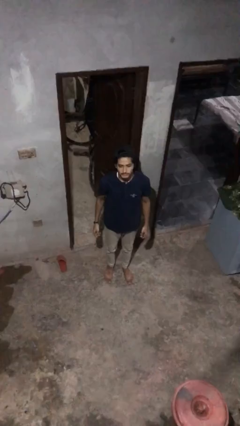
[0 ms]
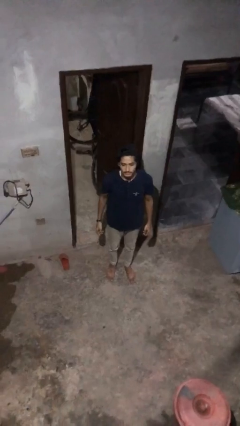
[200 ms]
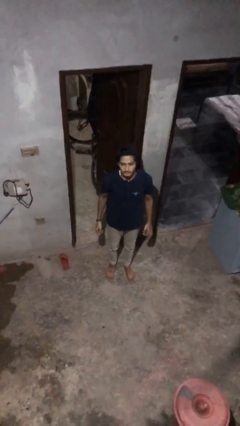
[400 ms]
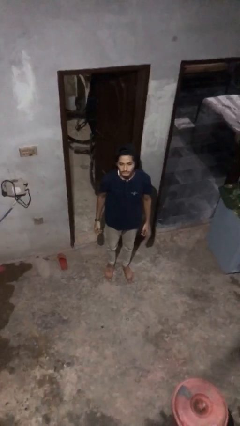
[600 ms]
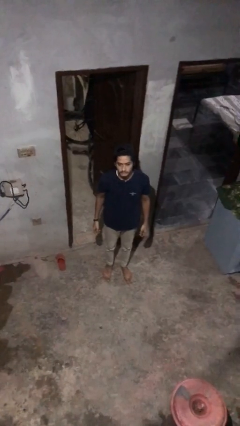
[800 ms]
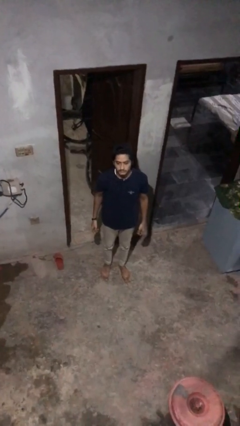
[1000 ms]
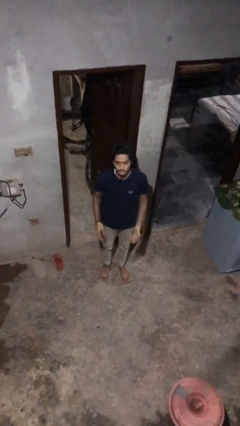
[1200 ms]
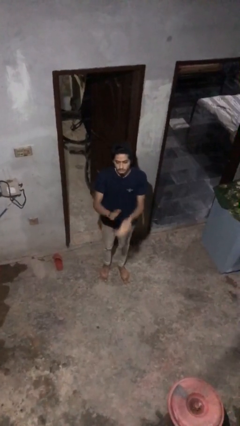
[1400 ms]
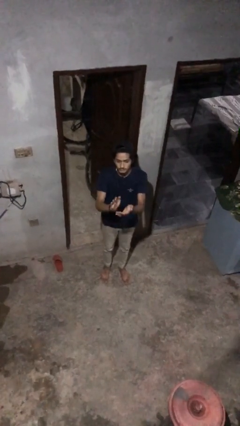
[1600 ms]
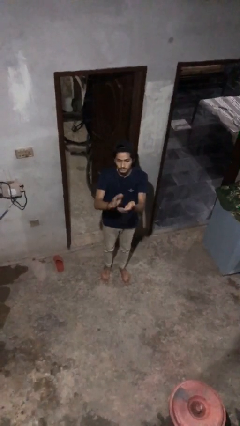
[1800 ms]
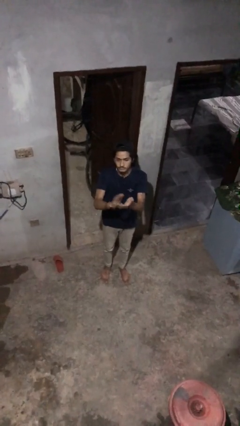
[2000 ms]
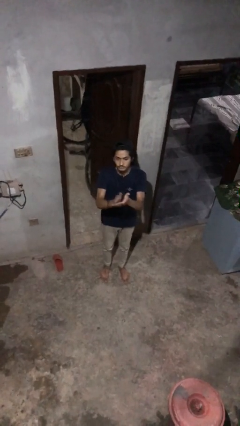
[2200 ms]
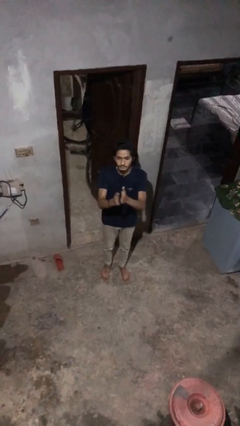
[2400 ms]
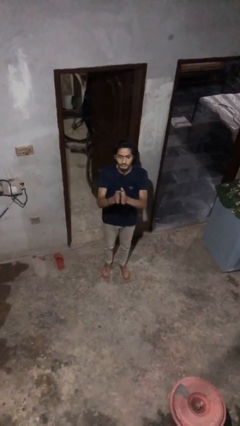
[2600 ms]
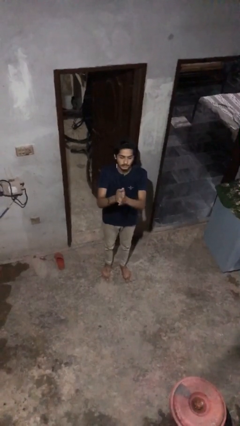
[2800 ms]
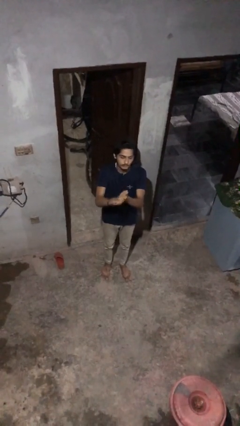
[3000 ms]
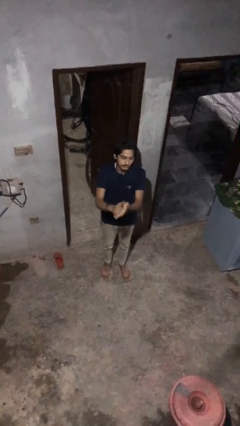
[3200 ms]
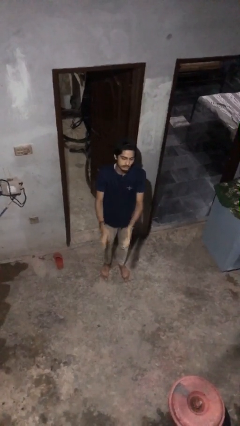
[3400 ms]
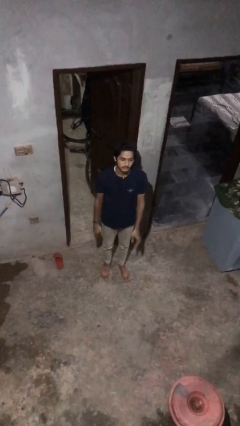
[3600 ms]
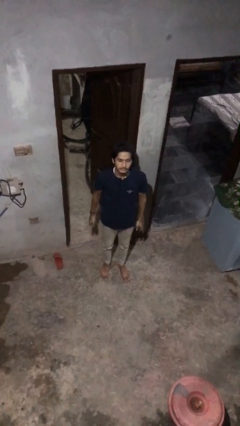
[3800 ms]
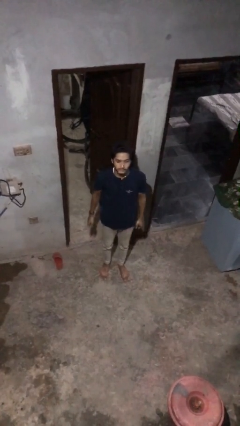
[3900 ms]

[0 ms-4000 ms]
person claps hands

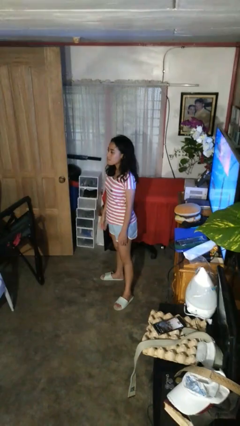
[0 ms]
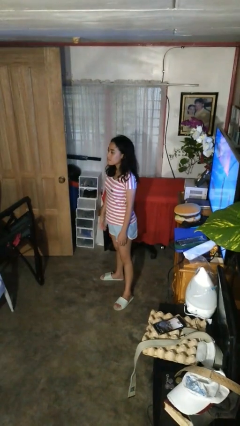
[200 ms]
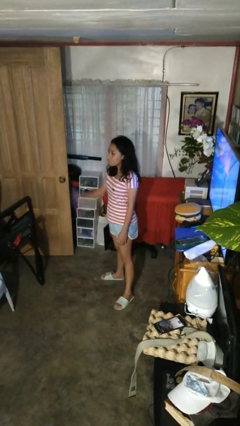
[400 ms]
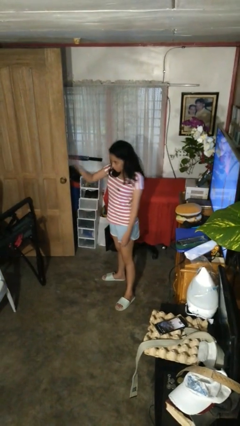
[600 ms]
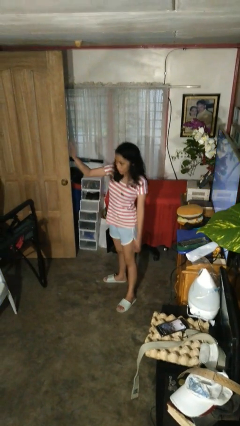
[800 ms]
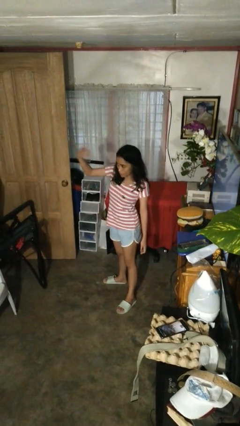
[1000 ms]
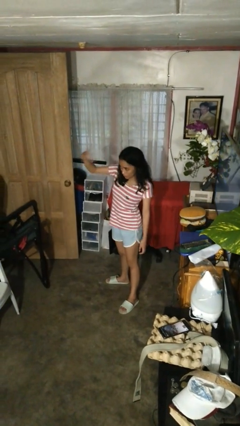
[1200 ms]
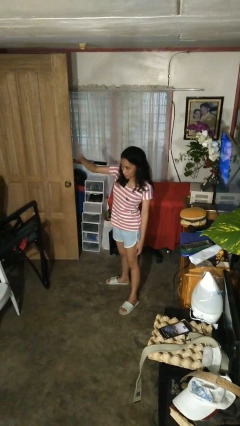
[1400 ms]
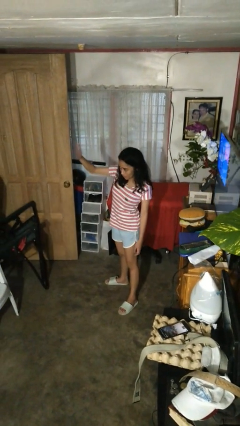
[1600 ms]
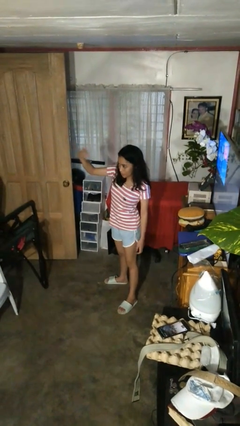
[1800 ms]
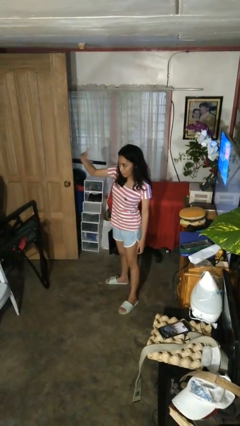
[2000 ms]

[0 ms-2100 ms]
person gestures come here

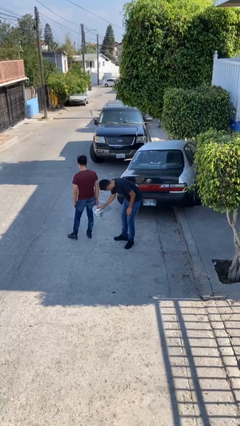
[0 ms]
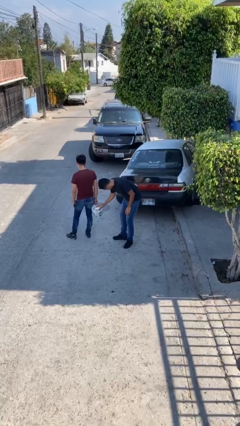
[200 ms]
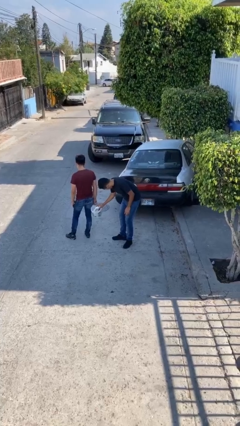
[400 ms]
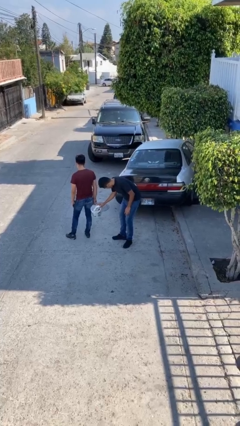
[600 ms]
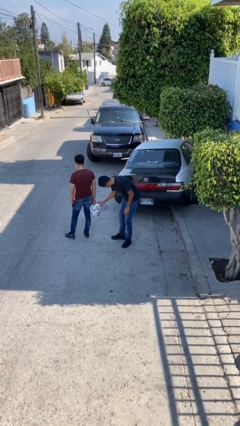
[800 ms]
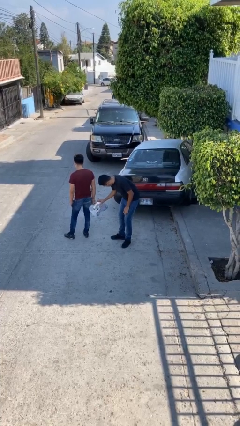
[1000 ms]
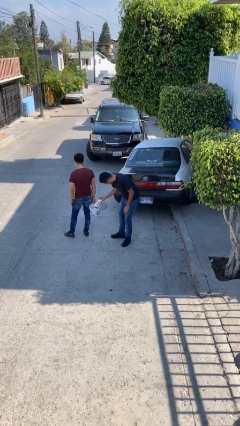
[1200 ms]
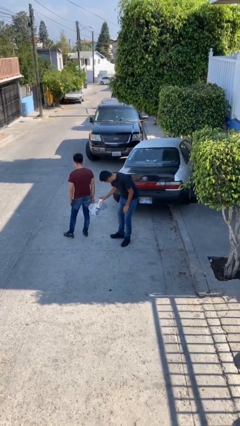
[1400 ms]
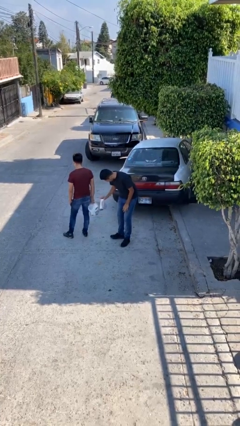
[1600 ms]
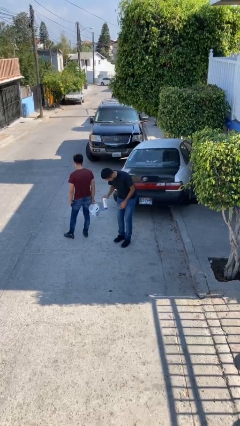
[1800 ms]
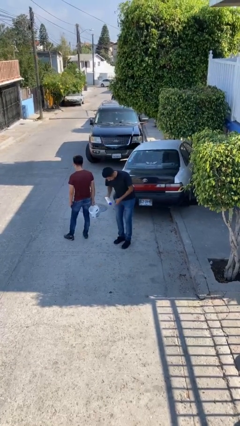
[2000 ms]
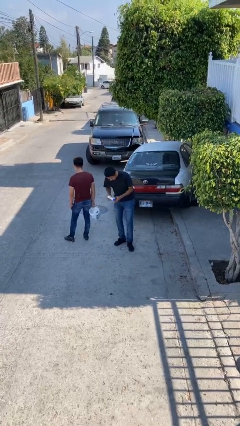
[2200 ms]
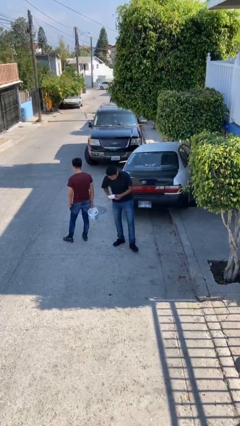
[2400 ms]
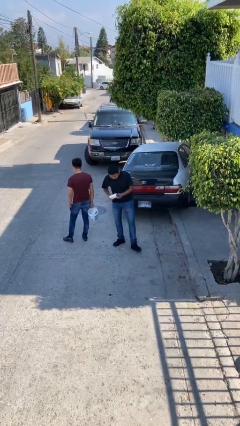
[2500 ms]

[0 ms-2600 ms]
person steals object from person

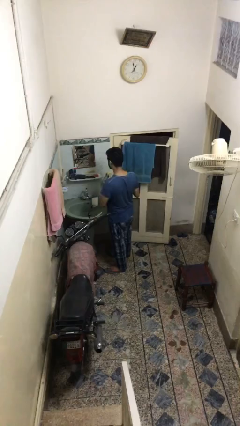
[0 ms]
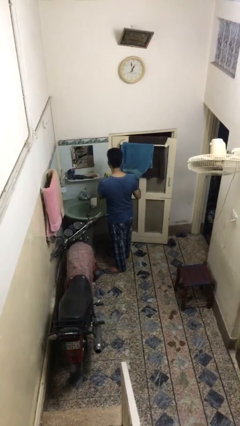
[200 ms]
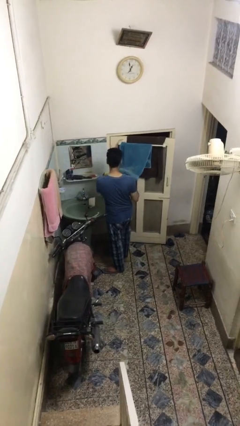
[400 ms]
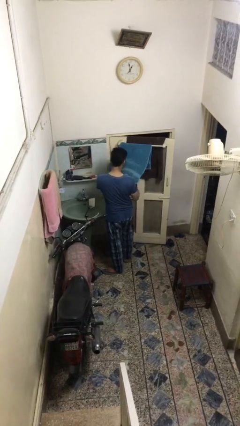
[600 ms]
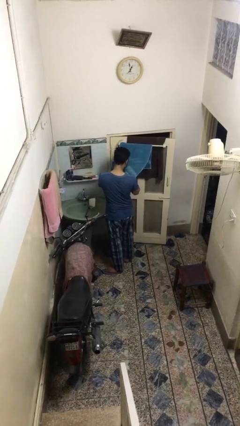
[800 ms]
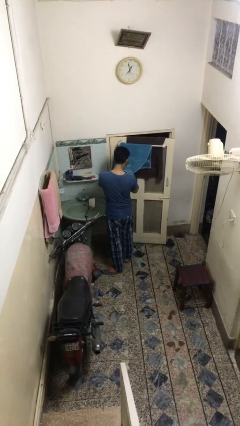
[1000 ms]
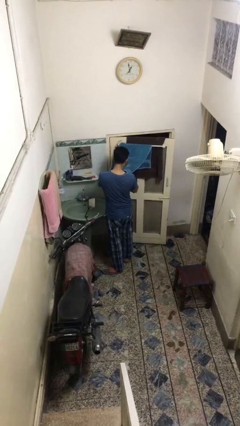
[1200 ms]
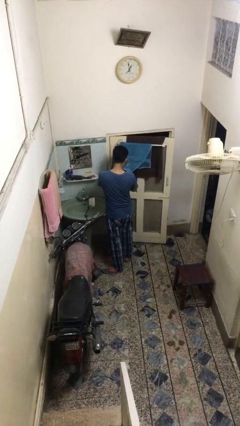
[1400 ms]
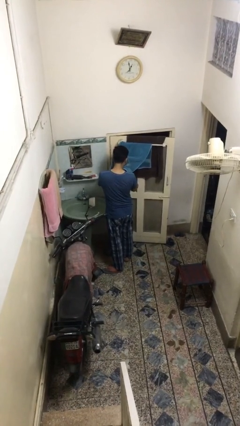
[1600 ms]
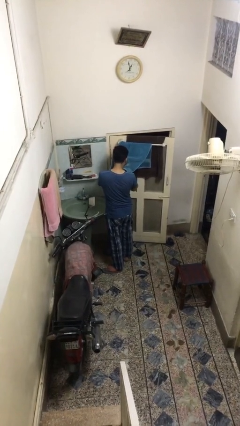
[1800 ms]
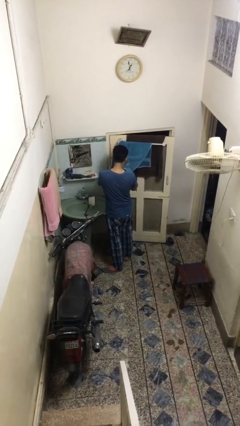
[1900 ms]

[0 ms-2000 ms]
person dries face with towel

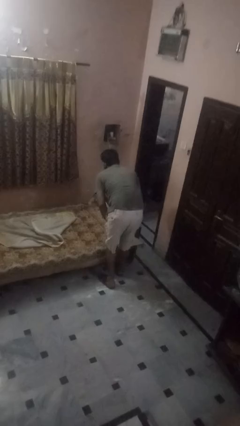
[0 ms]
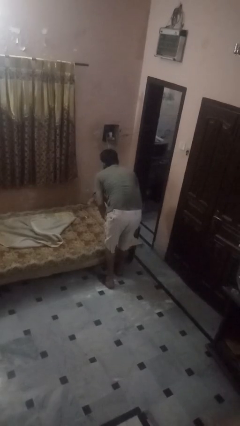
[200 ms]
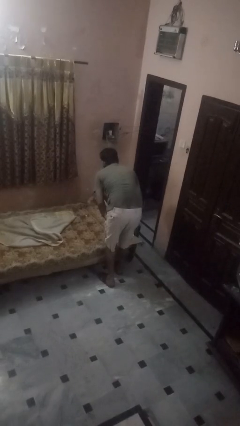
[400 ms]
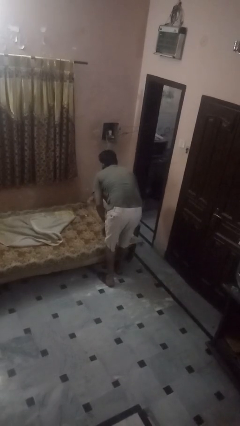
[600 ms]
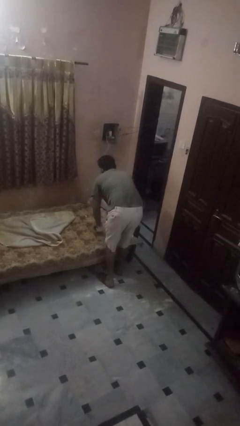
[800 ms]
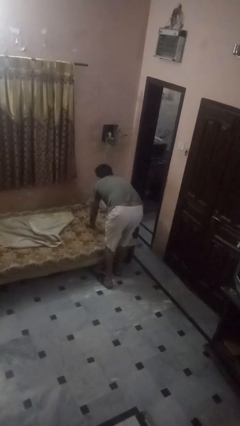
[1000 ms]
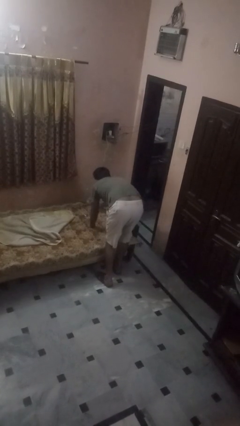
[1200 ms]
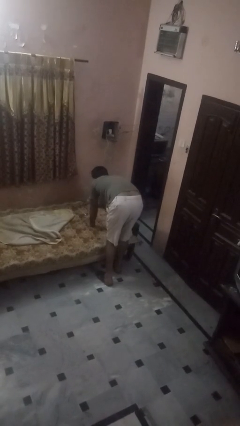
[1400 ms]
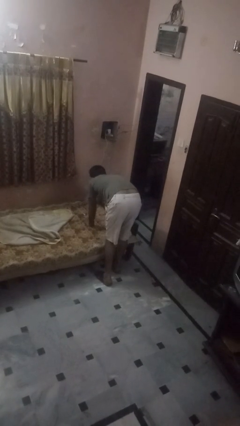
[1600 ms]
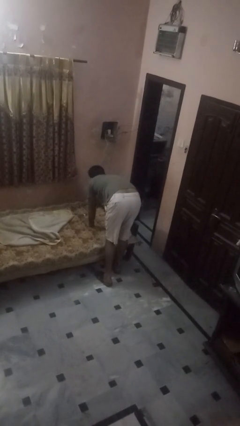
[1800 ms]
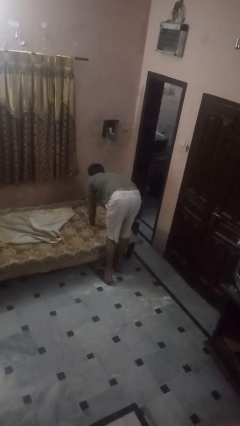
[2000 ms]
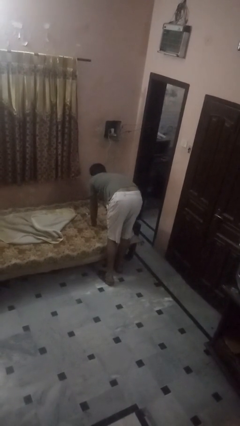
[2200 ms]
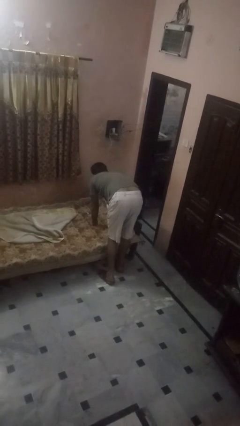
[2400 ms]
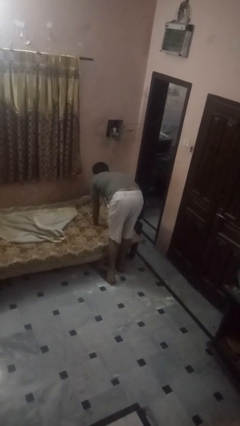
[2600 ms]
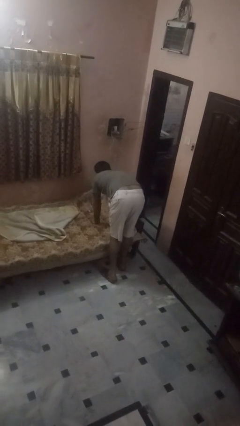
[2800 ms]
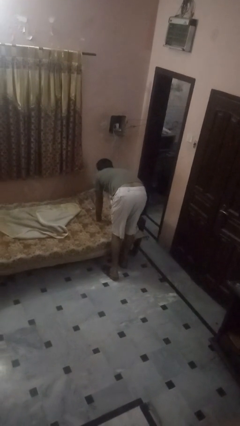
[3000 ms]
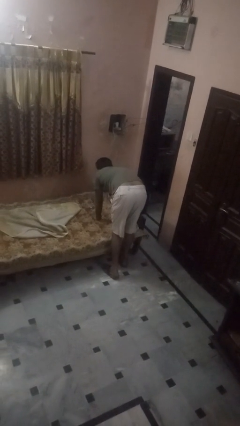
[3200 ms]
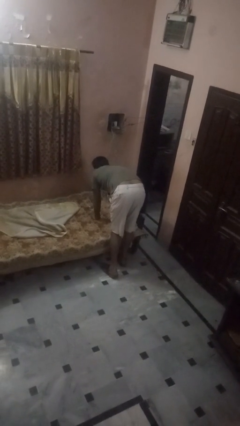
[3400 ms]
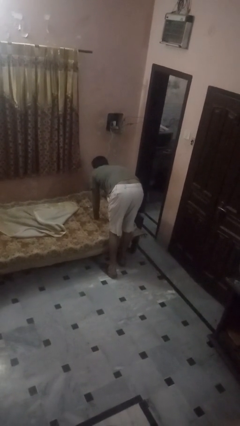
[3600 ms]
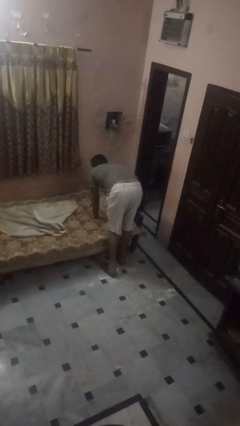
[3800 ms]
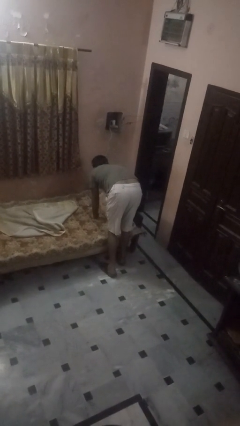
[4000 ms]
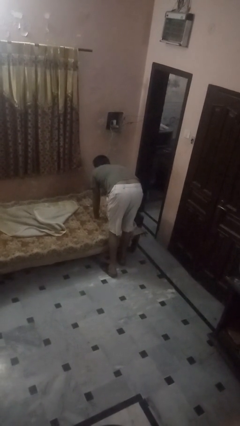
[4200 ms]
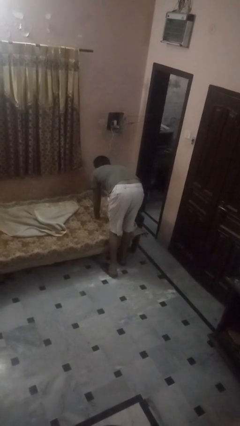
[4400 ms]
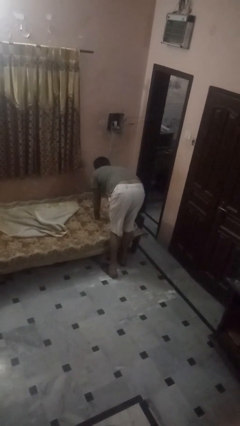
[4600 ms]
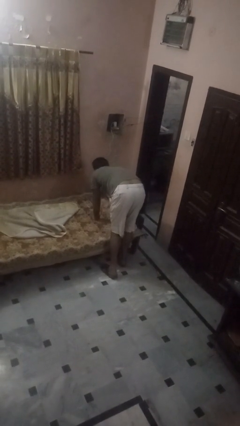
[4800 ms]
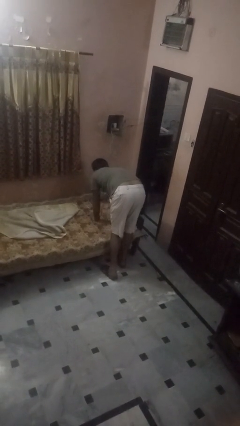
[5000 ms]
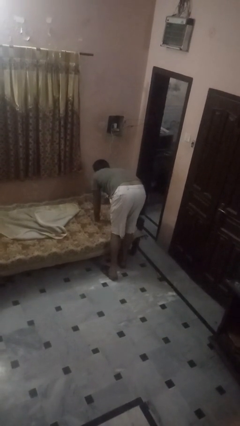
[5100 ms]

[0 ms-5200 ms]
person makes bed

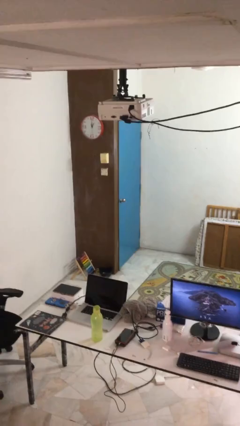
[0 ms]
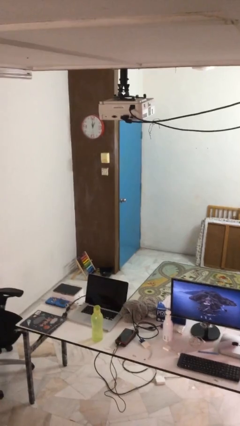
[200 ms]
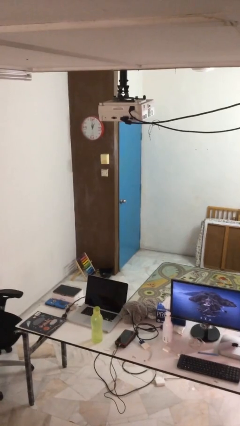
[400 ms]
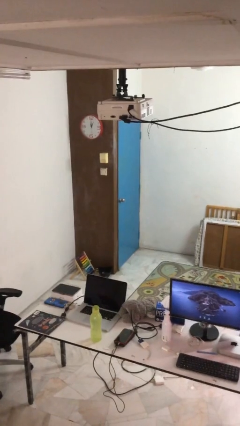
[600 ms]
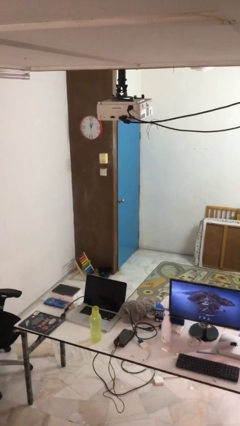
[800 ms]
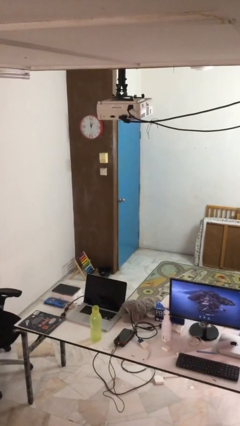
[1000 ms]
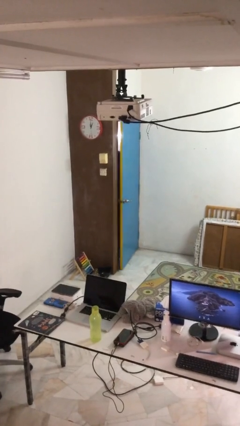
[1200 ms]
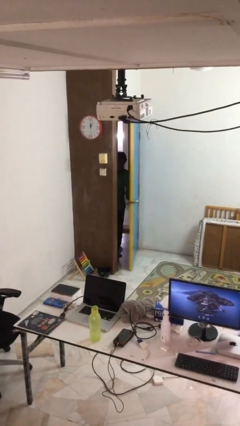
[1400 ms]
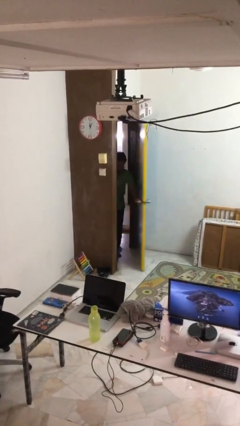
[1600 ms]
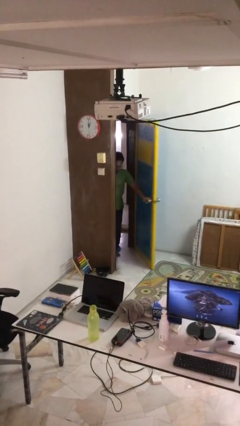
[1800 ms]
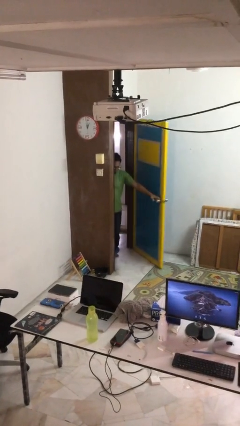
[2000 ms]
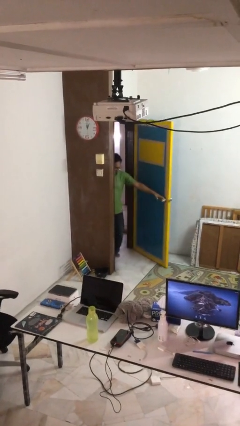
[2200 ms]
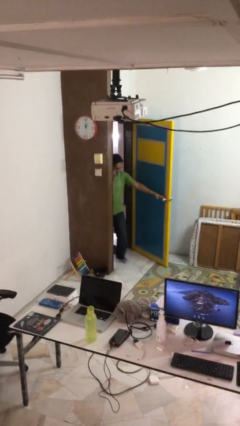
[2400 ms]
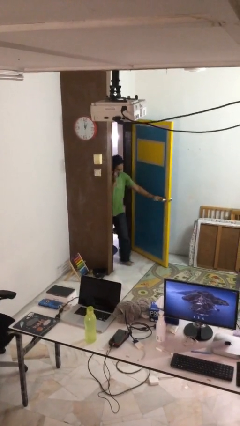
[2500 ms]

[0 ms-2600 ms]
person opens facility door
